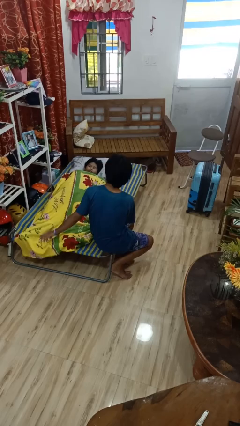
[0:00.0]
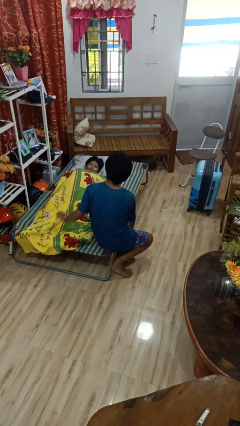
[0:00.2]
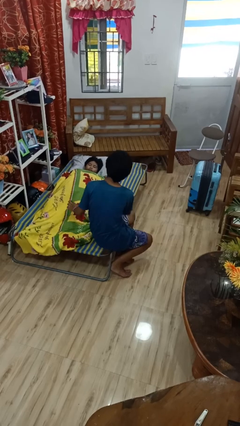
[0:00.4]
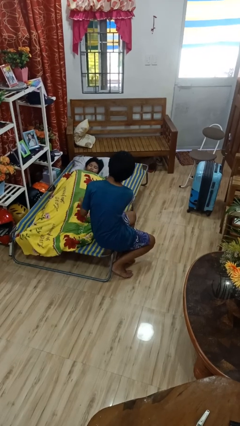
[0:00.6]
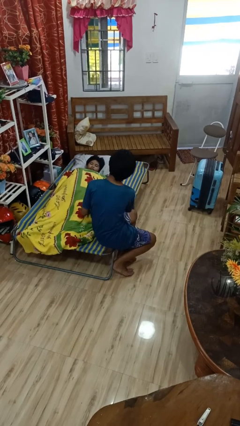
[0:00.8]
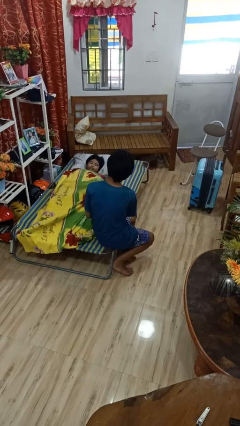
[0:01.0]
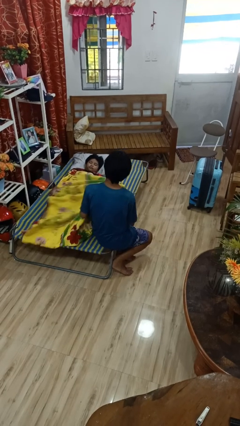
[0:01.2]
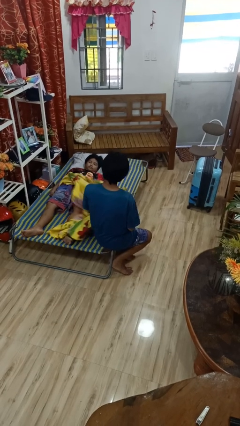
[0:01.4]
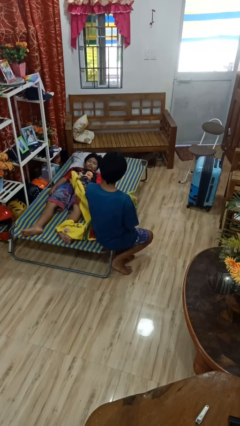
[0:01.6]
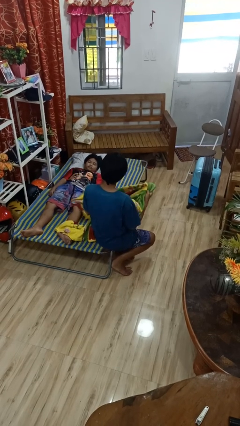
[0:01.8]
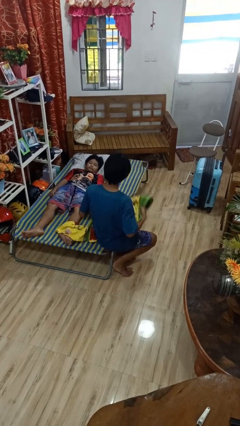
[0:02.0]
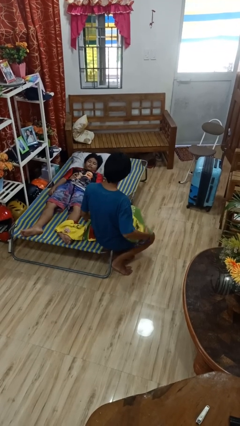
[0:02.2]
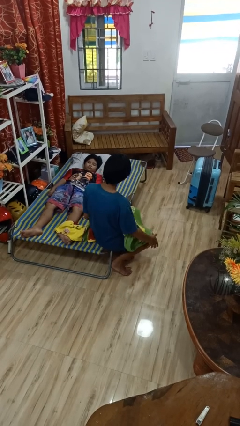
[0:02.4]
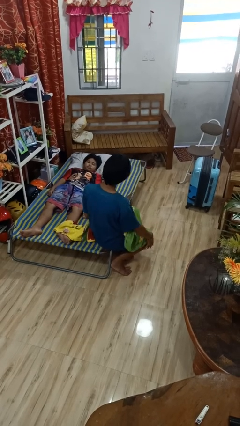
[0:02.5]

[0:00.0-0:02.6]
person uncovers friend with blanket

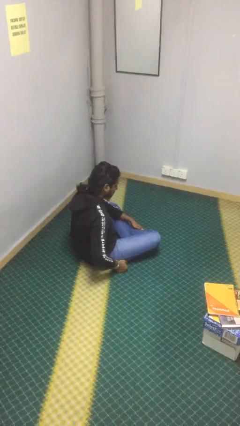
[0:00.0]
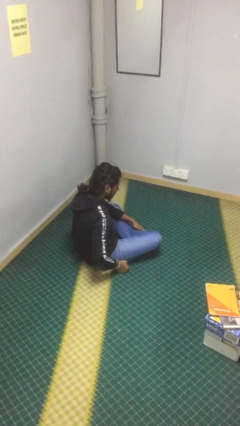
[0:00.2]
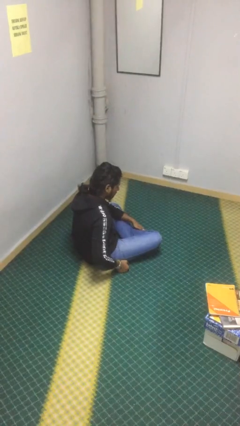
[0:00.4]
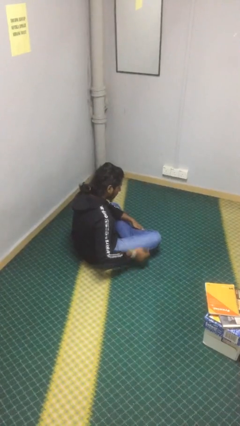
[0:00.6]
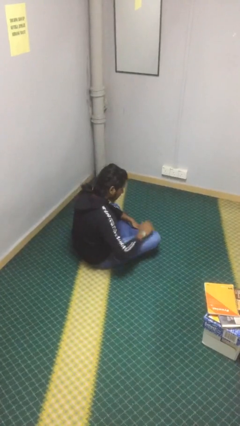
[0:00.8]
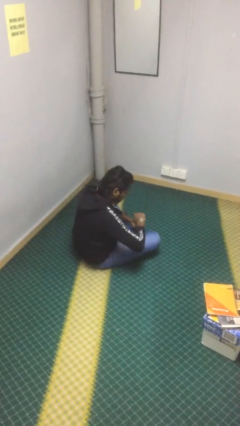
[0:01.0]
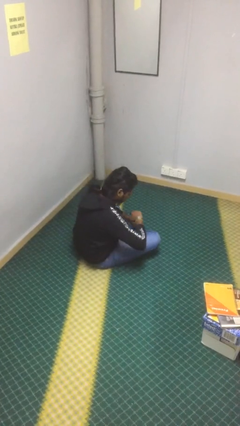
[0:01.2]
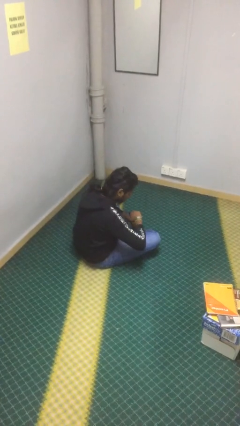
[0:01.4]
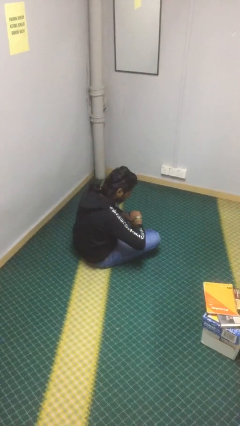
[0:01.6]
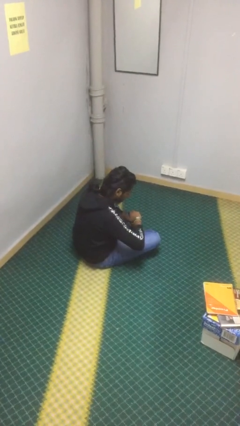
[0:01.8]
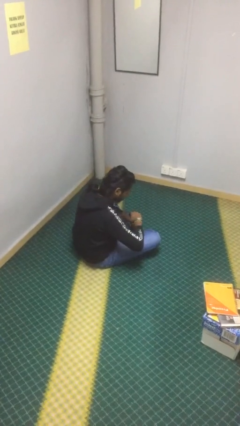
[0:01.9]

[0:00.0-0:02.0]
person looks at wristwatch

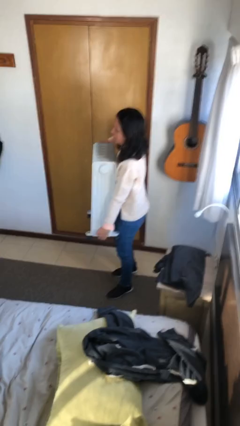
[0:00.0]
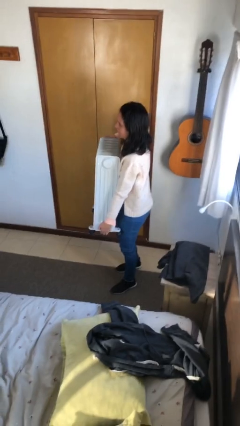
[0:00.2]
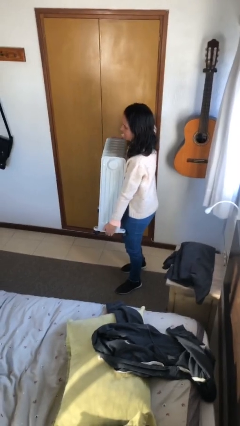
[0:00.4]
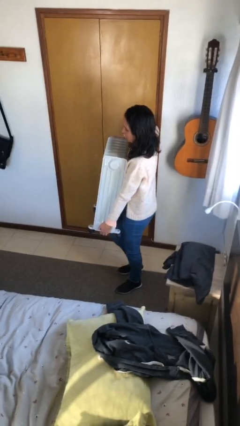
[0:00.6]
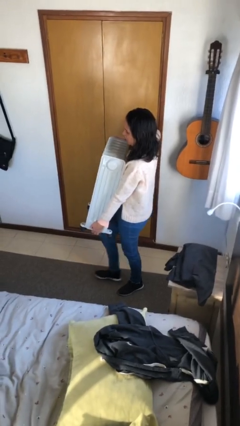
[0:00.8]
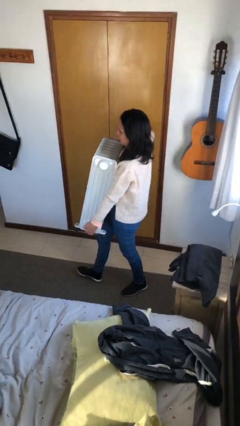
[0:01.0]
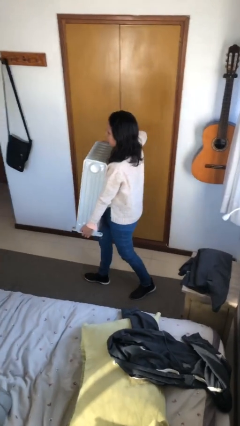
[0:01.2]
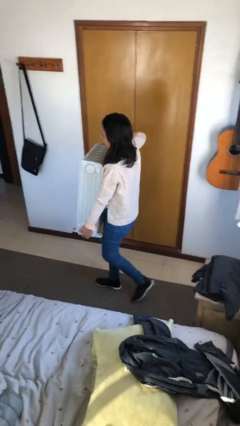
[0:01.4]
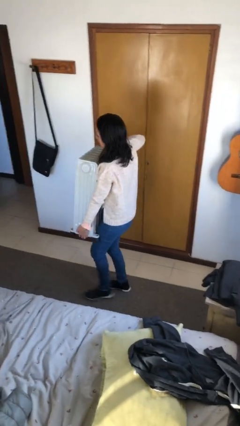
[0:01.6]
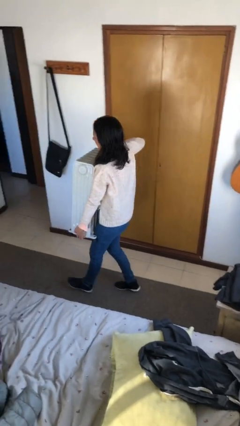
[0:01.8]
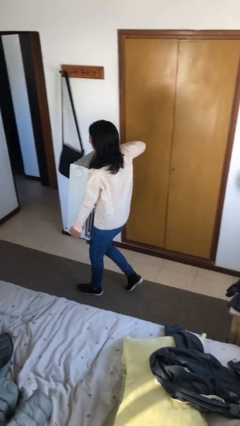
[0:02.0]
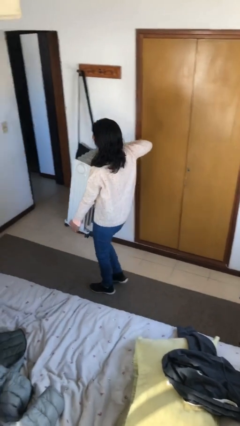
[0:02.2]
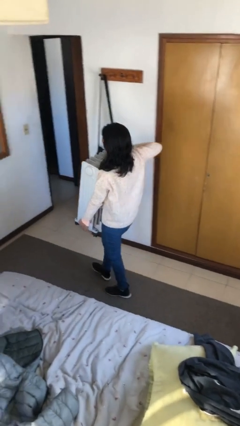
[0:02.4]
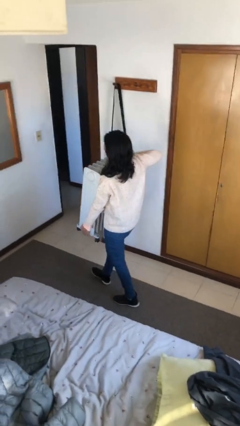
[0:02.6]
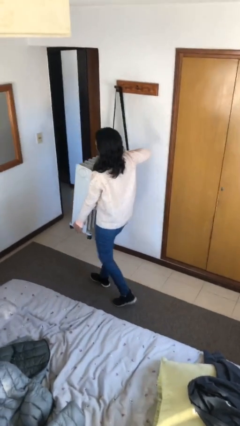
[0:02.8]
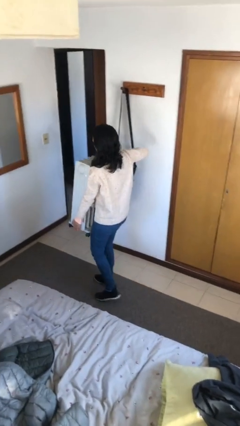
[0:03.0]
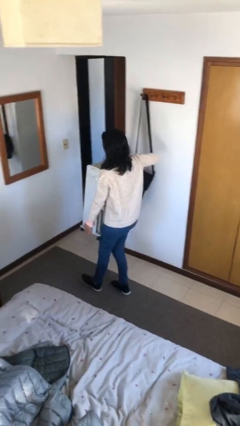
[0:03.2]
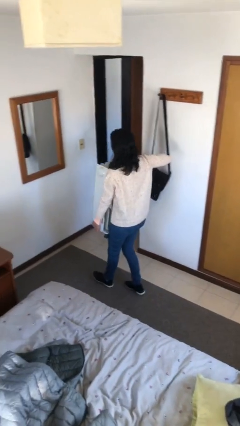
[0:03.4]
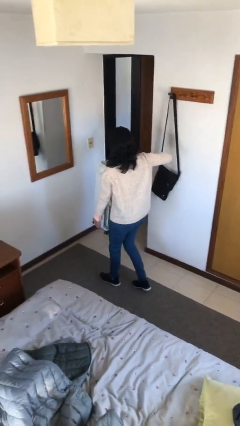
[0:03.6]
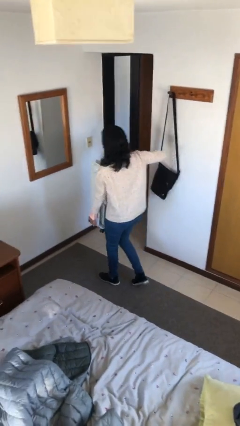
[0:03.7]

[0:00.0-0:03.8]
person carries heavy object

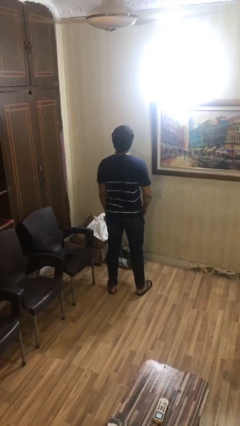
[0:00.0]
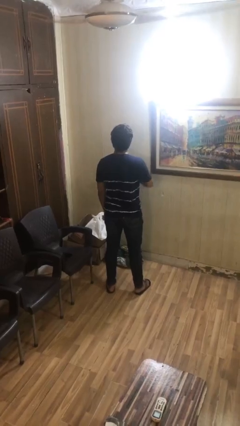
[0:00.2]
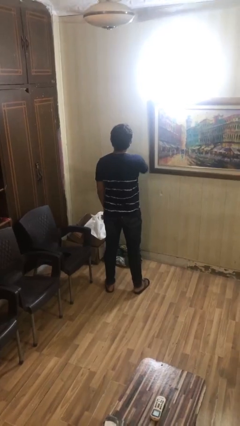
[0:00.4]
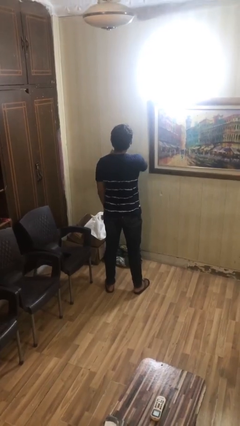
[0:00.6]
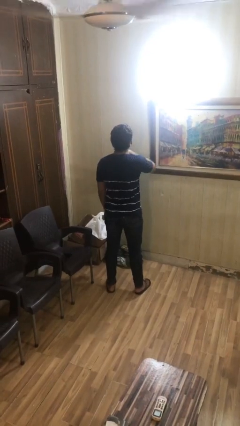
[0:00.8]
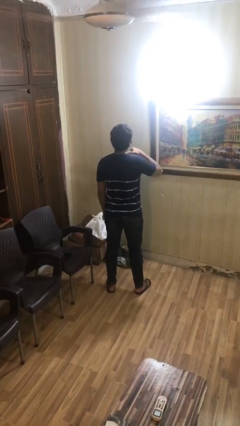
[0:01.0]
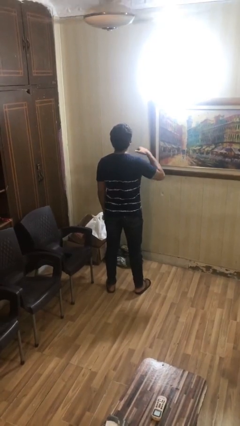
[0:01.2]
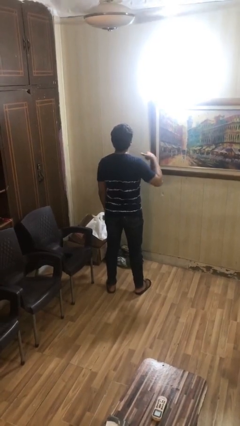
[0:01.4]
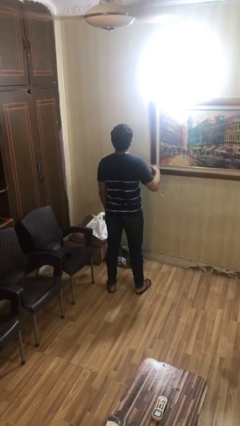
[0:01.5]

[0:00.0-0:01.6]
person gestures cut

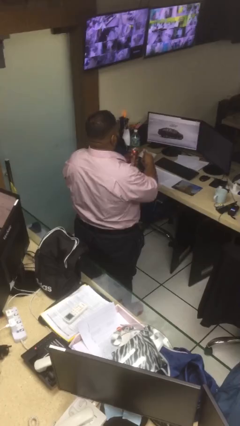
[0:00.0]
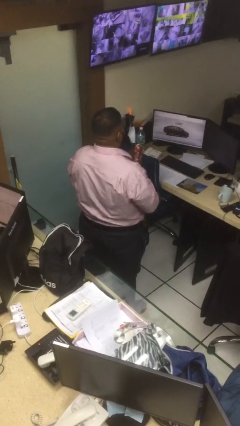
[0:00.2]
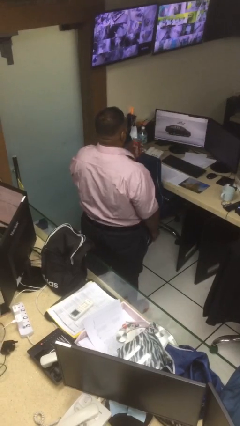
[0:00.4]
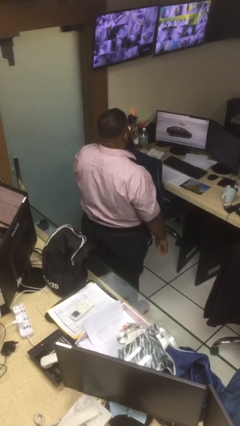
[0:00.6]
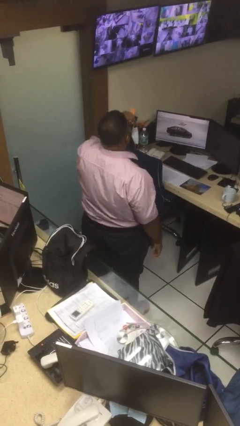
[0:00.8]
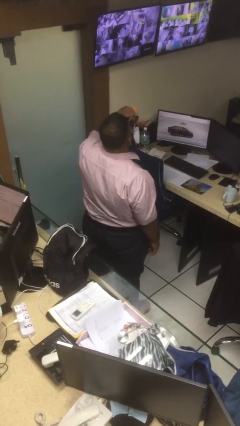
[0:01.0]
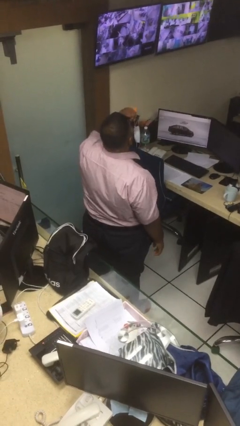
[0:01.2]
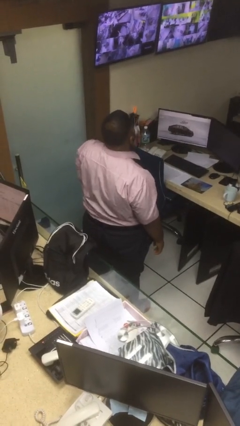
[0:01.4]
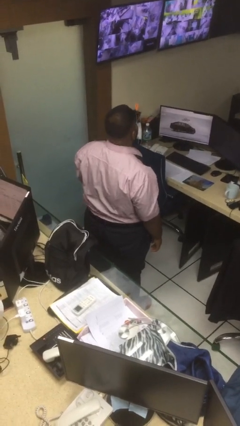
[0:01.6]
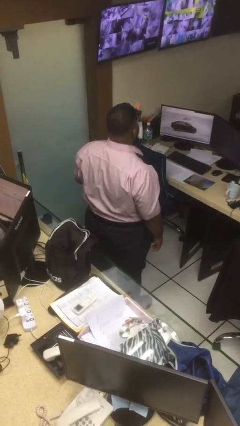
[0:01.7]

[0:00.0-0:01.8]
person drinks from beverage can

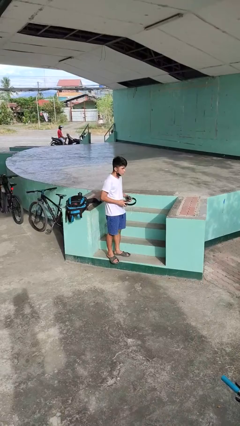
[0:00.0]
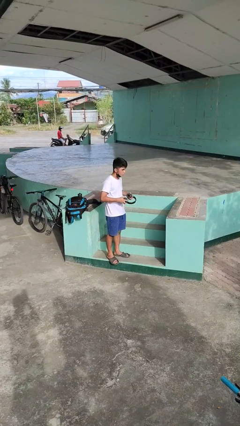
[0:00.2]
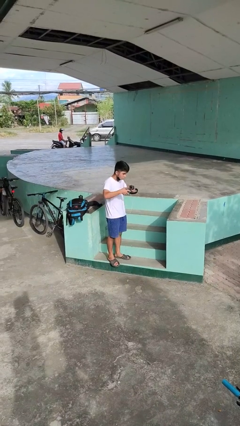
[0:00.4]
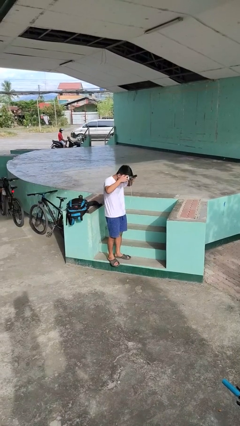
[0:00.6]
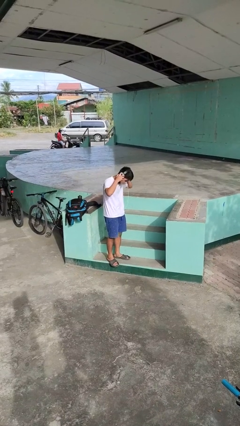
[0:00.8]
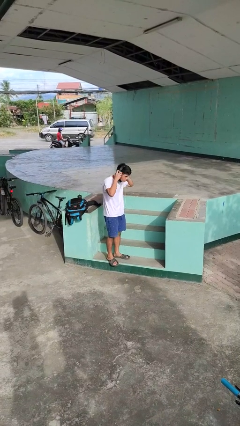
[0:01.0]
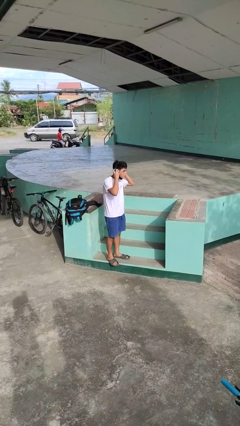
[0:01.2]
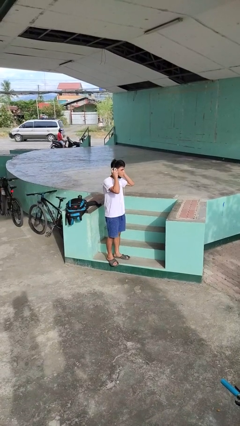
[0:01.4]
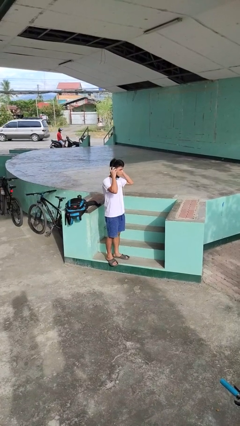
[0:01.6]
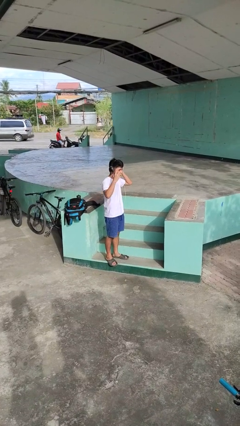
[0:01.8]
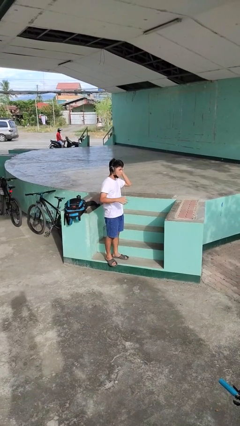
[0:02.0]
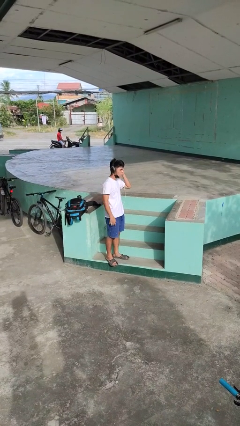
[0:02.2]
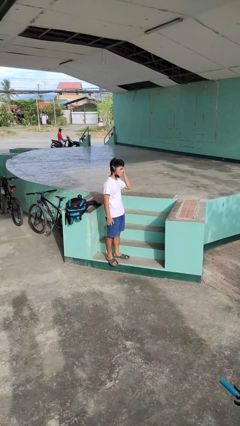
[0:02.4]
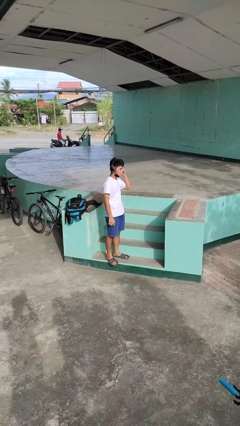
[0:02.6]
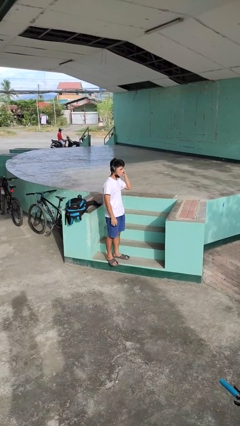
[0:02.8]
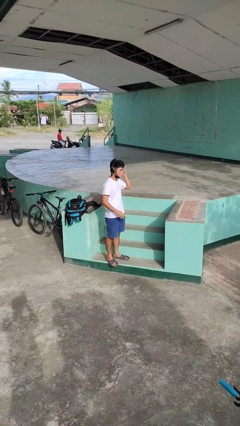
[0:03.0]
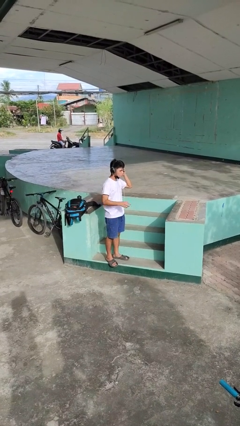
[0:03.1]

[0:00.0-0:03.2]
person puts on headphones

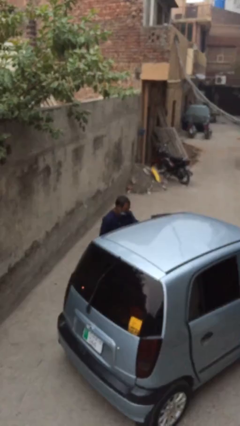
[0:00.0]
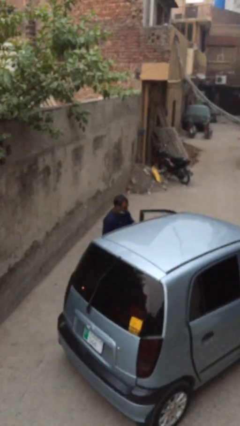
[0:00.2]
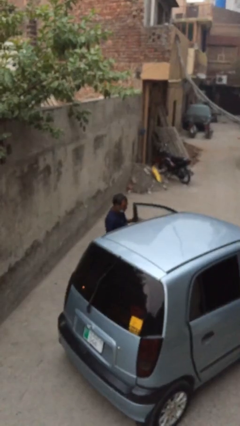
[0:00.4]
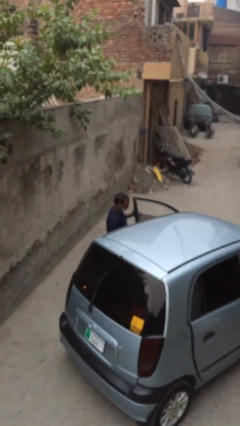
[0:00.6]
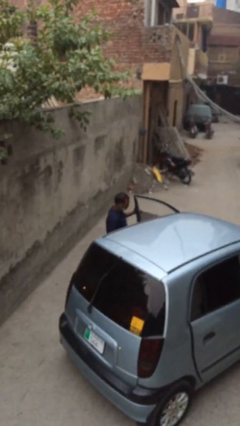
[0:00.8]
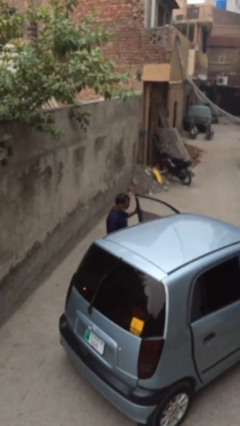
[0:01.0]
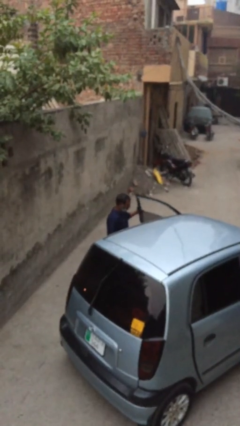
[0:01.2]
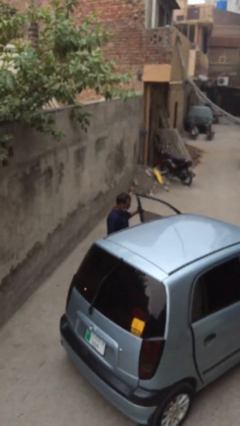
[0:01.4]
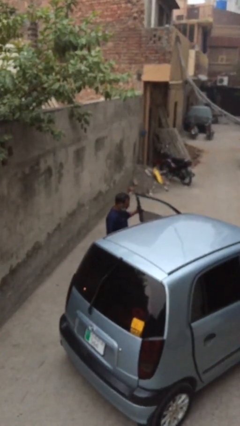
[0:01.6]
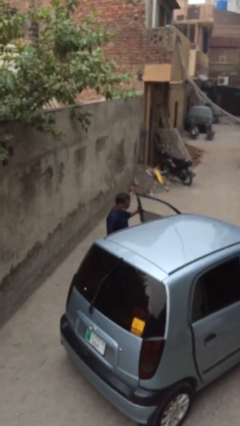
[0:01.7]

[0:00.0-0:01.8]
person opens car door
